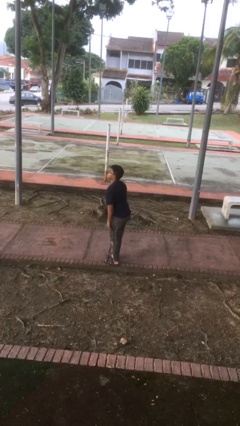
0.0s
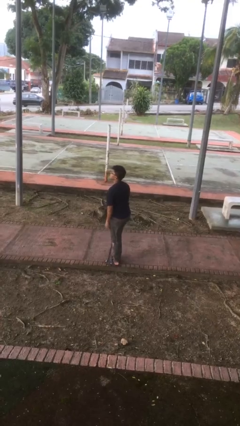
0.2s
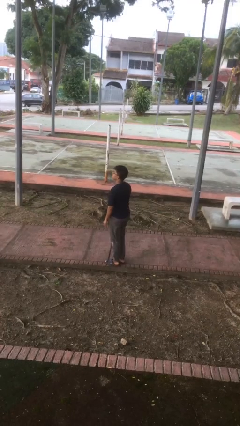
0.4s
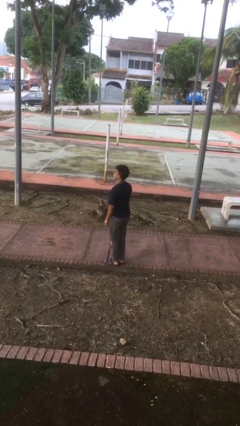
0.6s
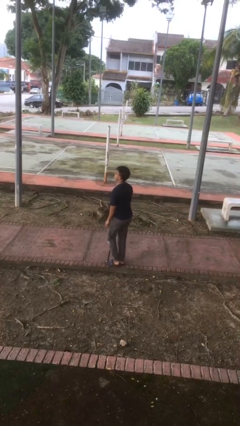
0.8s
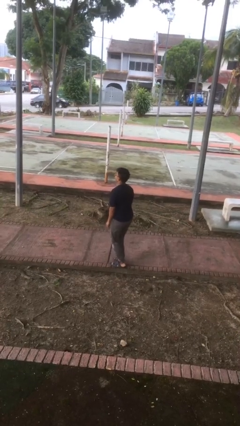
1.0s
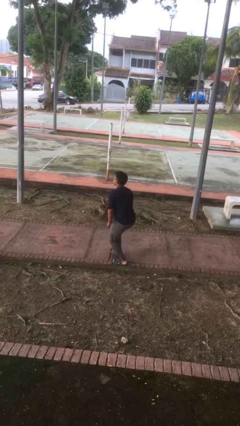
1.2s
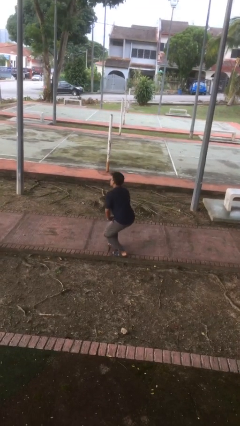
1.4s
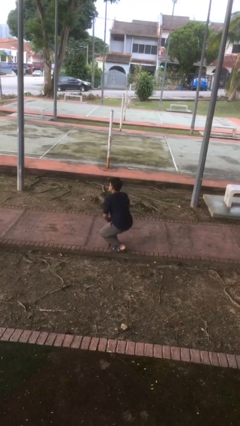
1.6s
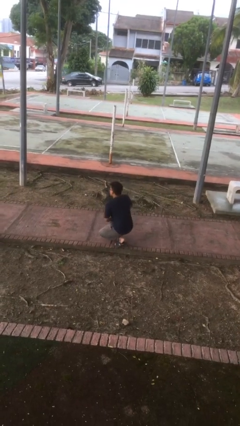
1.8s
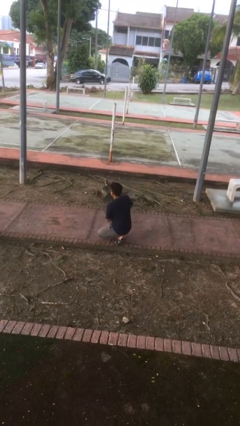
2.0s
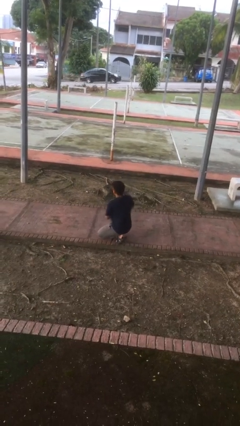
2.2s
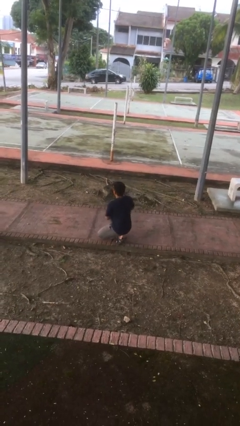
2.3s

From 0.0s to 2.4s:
person kneels

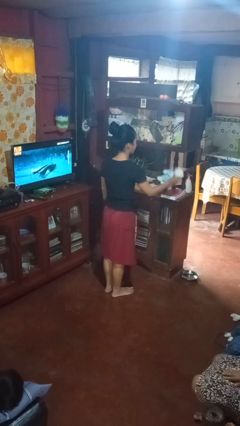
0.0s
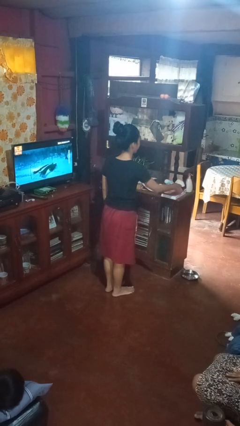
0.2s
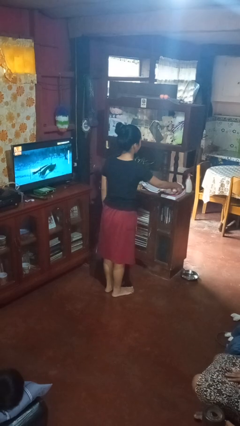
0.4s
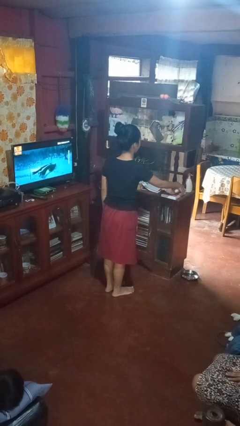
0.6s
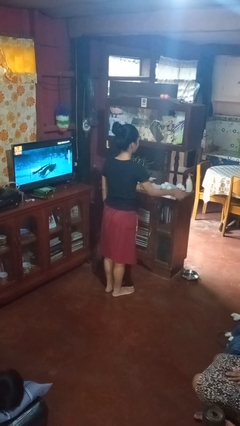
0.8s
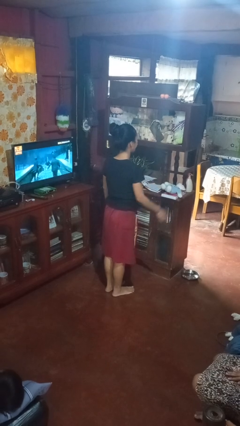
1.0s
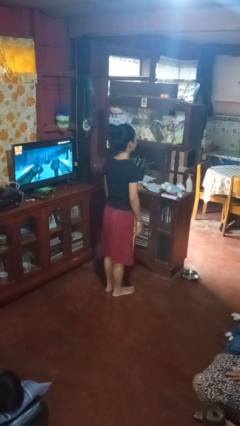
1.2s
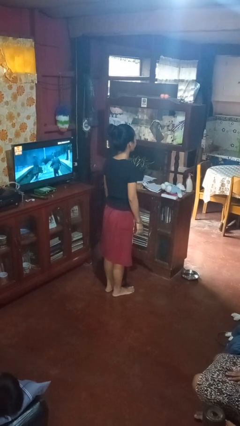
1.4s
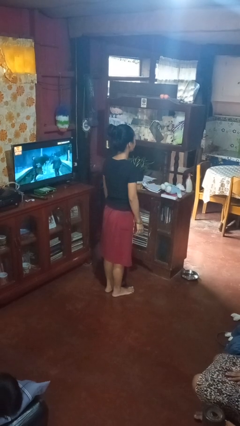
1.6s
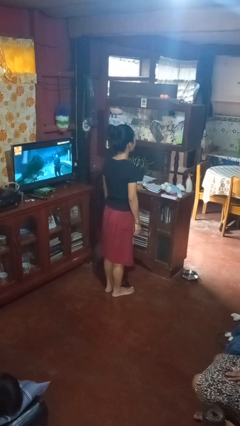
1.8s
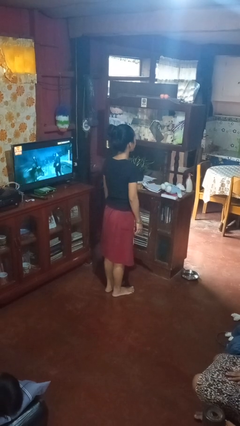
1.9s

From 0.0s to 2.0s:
person puts down object on shelf

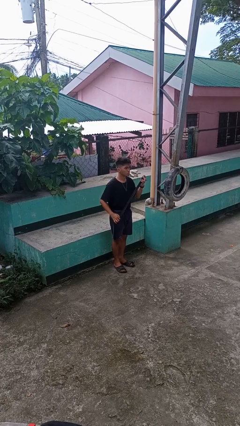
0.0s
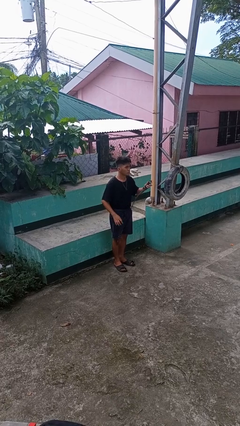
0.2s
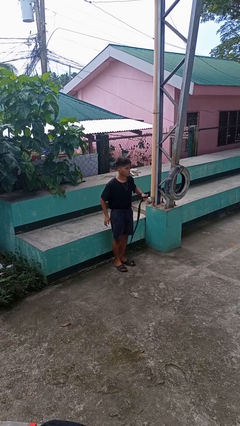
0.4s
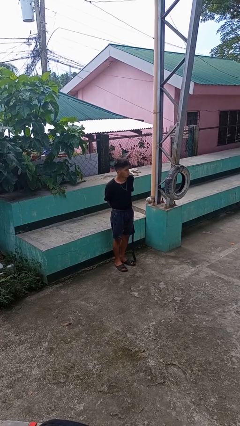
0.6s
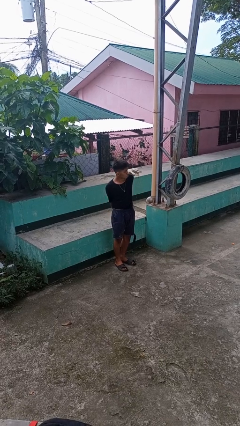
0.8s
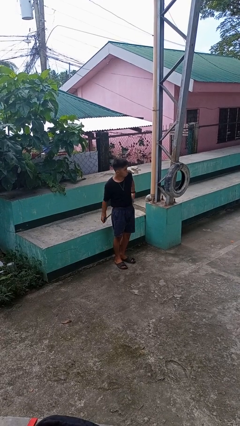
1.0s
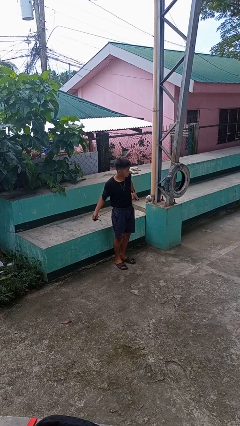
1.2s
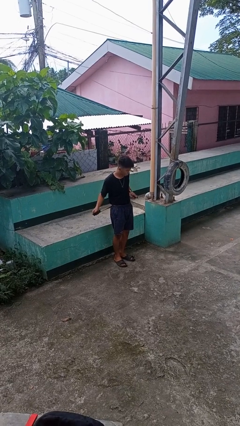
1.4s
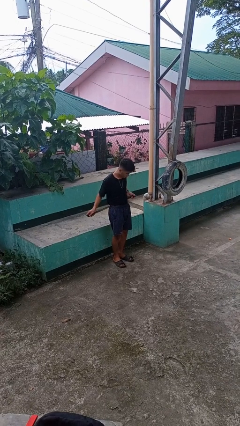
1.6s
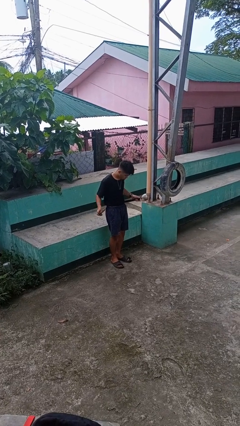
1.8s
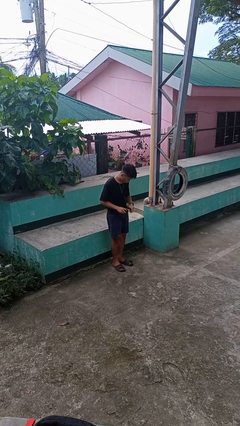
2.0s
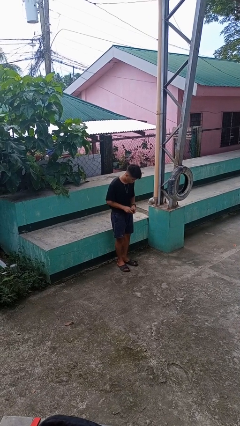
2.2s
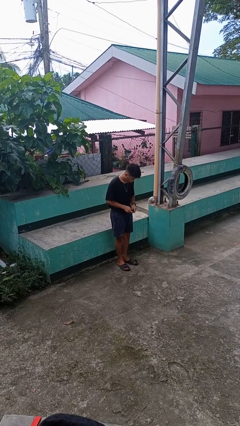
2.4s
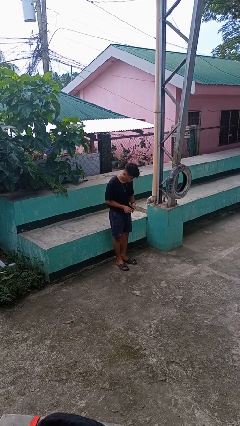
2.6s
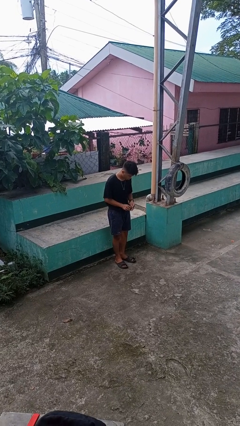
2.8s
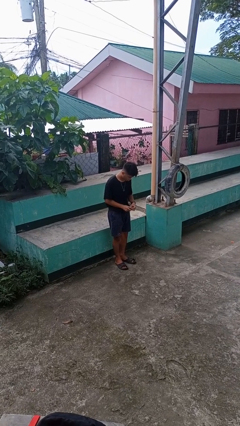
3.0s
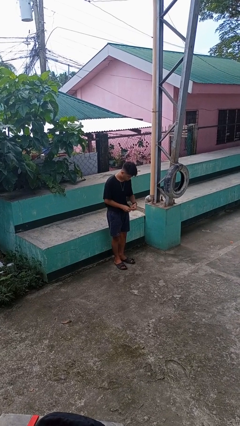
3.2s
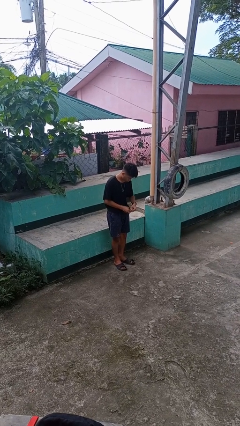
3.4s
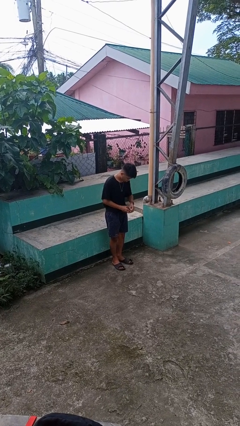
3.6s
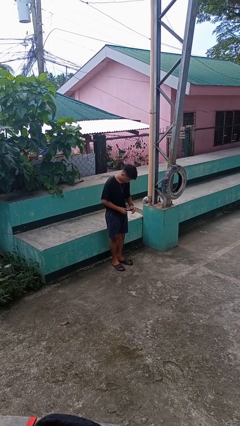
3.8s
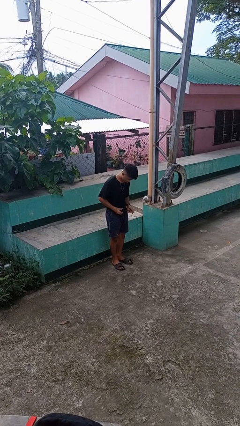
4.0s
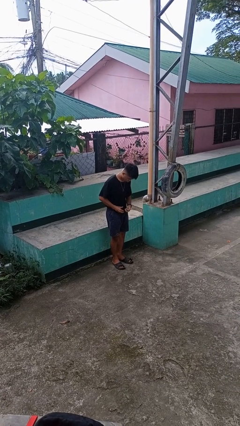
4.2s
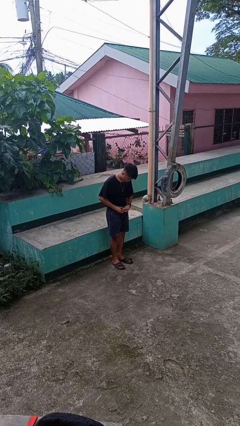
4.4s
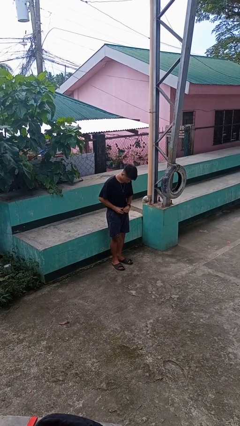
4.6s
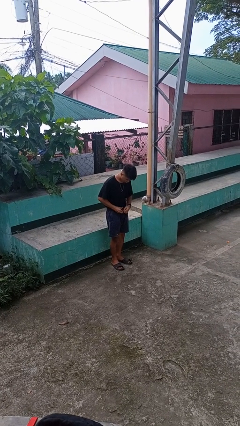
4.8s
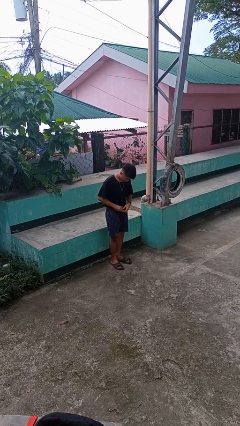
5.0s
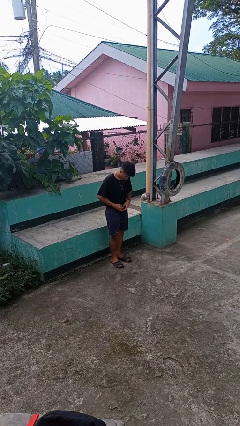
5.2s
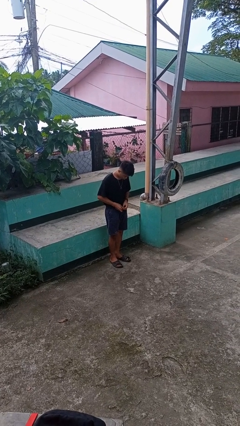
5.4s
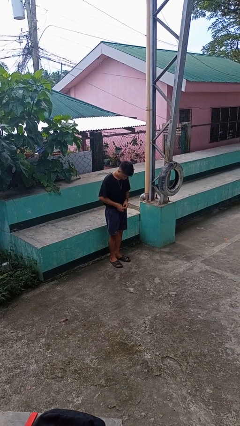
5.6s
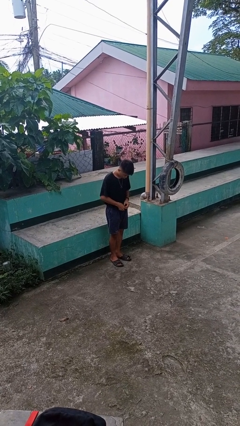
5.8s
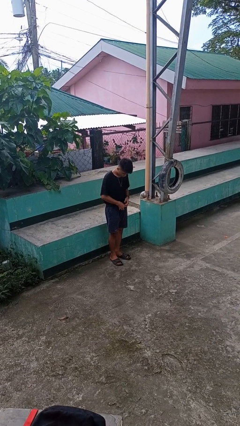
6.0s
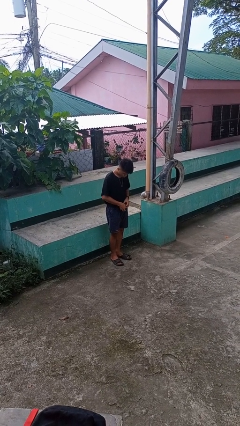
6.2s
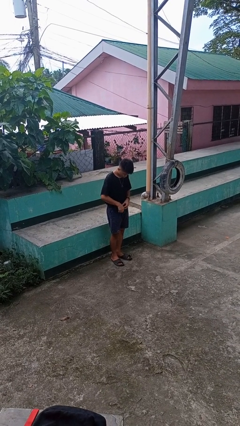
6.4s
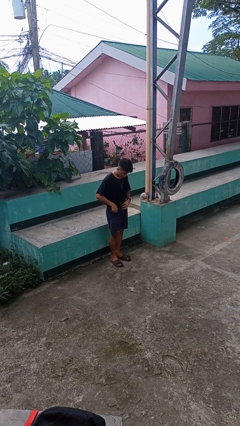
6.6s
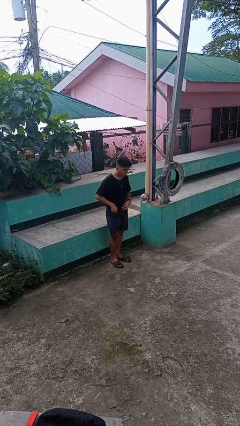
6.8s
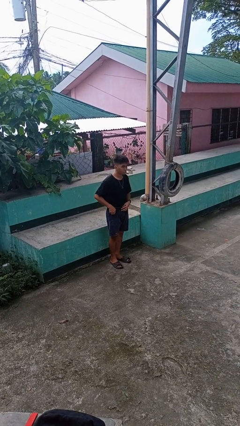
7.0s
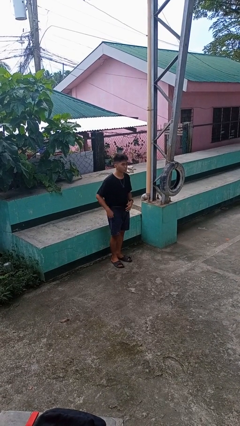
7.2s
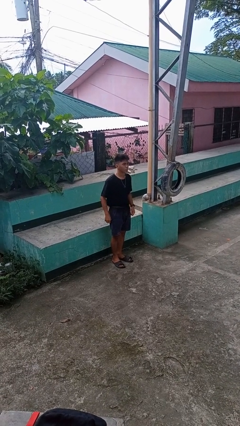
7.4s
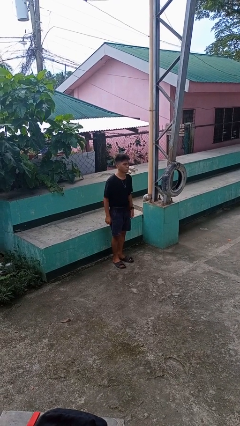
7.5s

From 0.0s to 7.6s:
person puts on belt

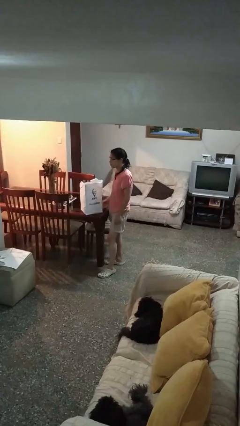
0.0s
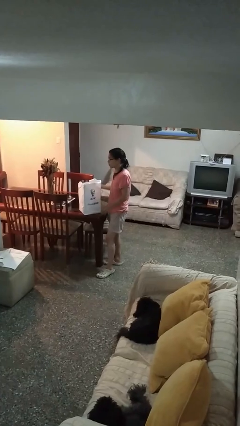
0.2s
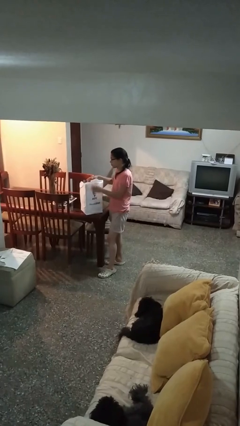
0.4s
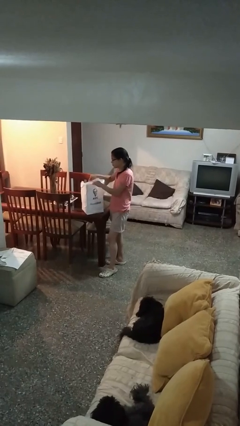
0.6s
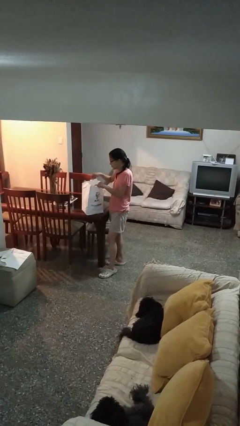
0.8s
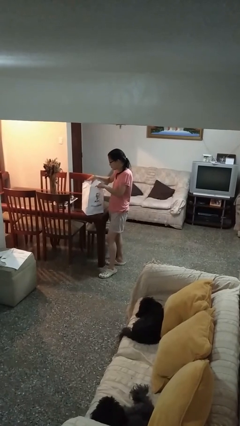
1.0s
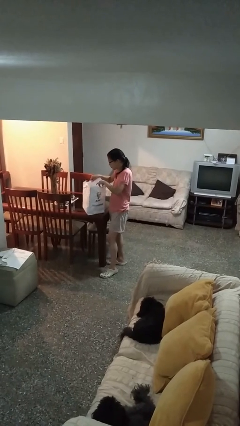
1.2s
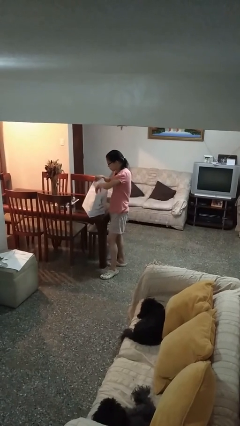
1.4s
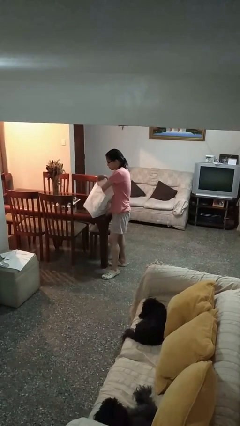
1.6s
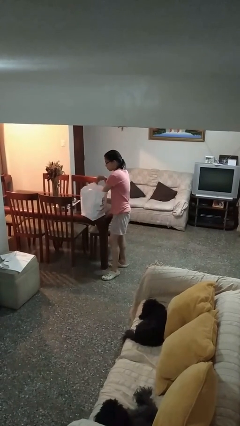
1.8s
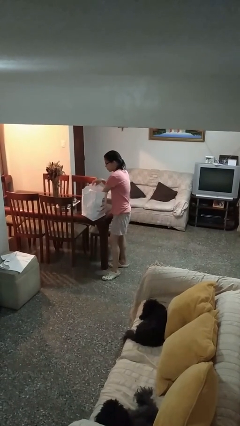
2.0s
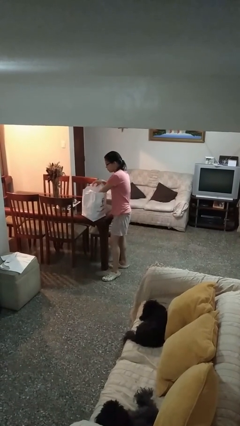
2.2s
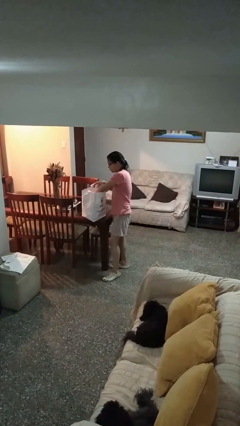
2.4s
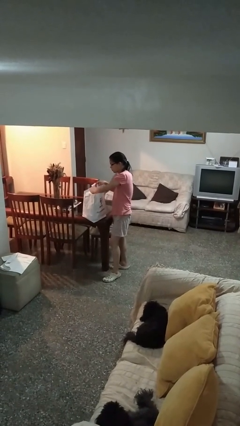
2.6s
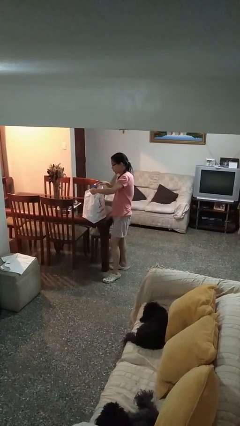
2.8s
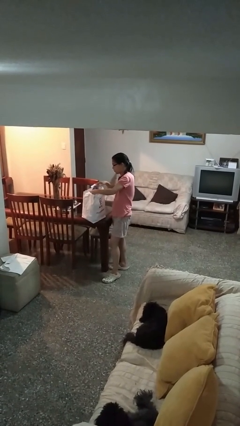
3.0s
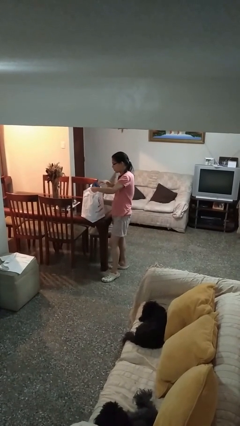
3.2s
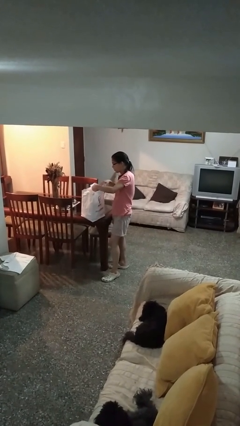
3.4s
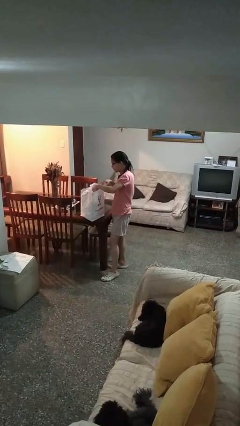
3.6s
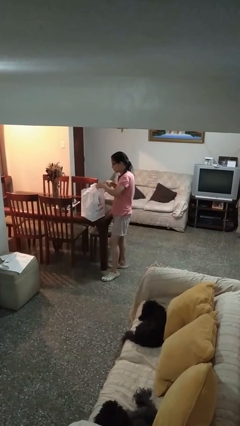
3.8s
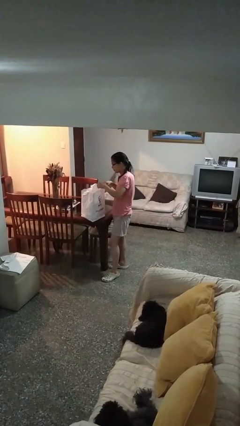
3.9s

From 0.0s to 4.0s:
person searches in bag

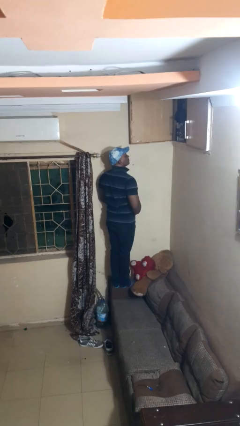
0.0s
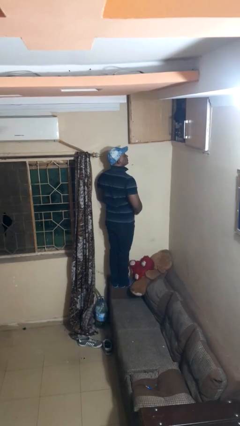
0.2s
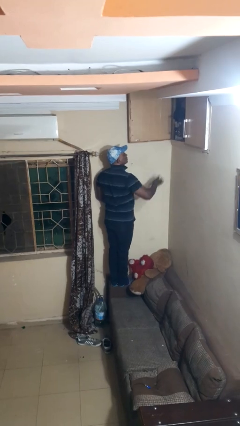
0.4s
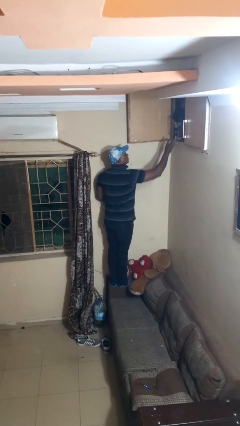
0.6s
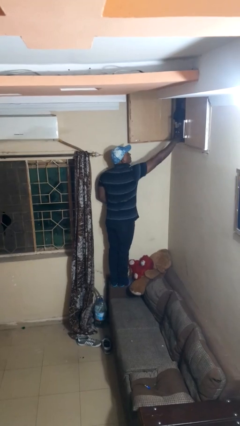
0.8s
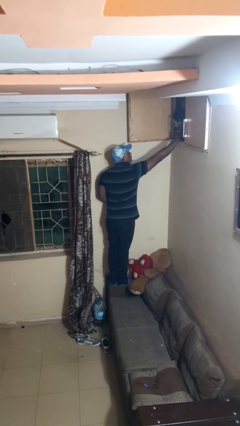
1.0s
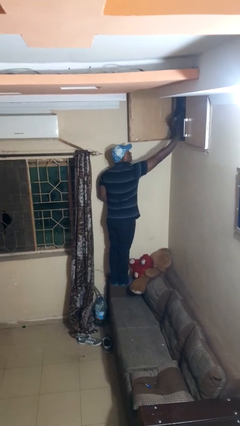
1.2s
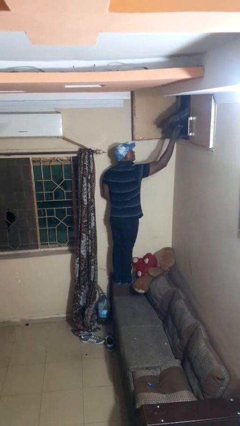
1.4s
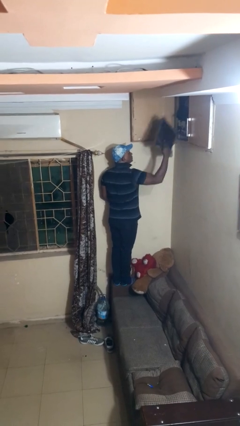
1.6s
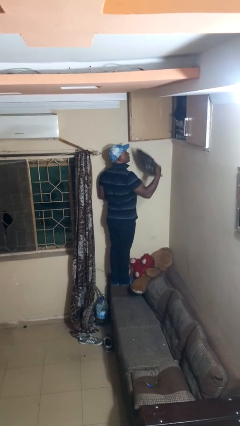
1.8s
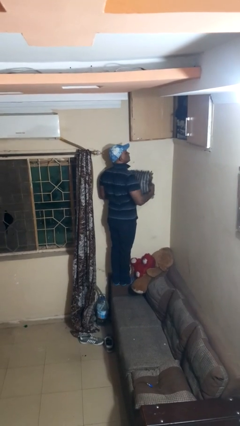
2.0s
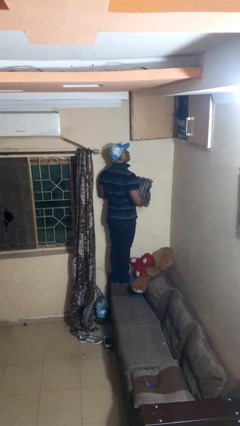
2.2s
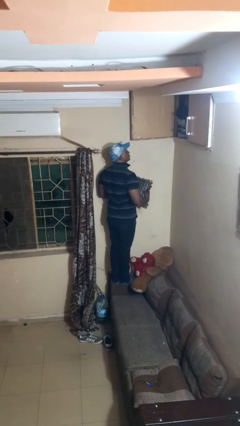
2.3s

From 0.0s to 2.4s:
person takes object from cabinet
